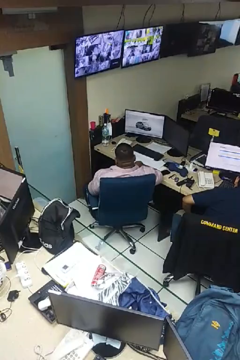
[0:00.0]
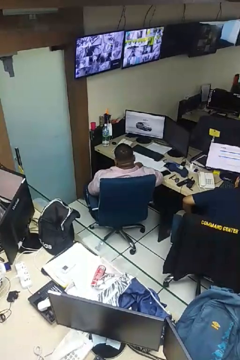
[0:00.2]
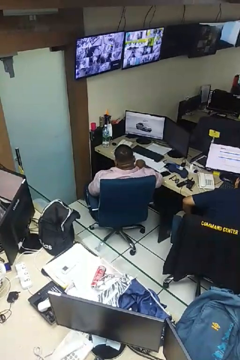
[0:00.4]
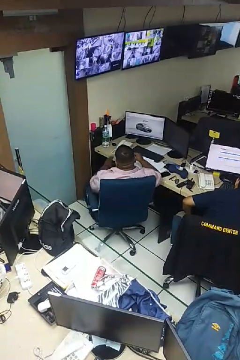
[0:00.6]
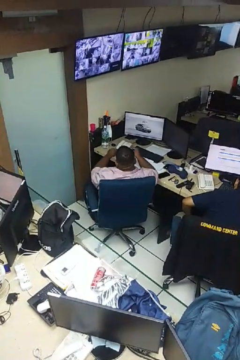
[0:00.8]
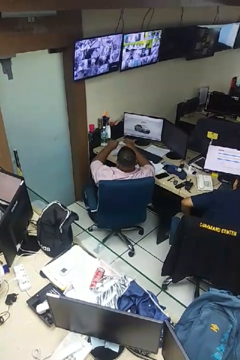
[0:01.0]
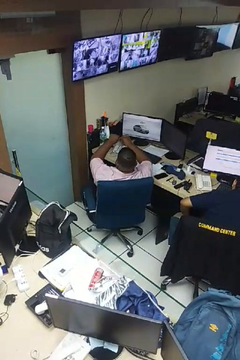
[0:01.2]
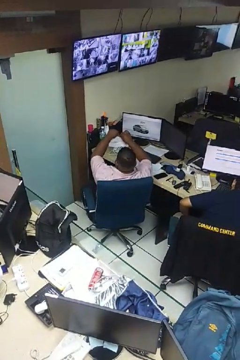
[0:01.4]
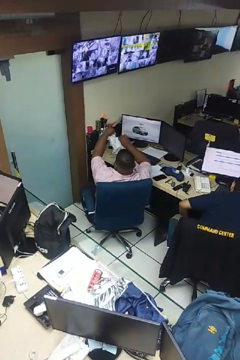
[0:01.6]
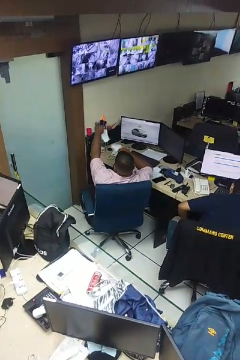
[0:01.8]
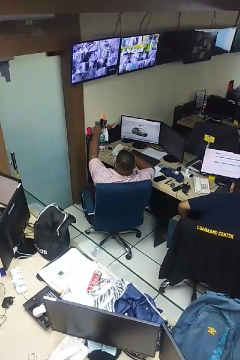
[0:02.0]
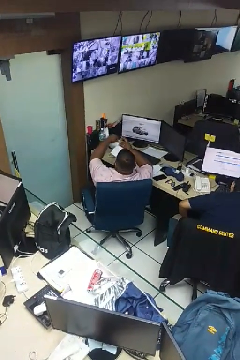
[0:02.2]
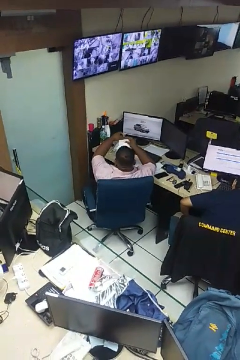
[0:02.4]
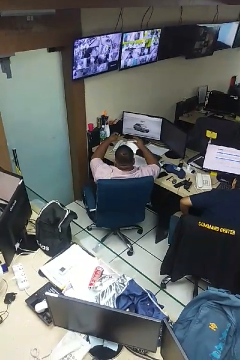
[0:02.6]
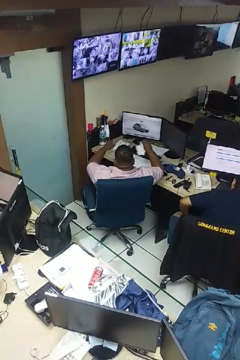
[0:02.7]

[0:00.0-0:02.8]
person tears paper

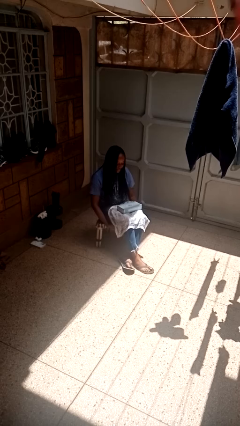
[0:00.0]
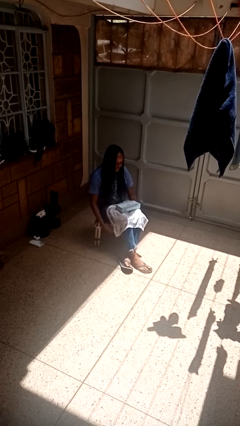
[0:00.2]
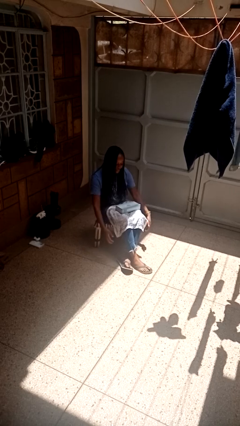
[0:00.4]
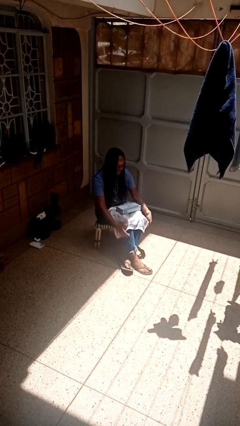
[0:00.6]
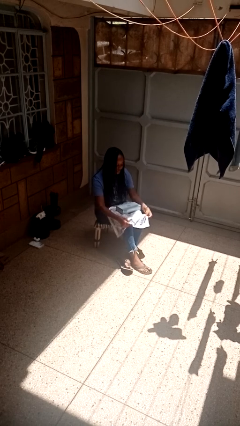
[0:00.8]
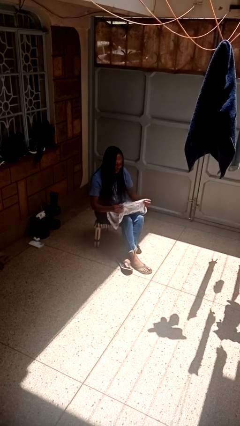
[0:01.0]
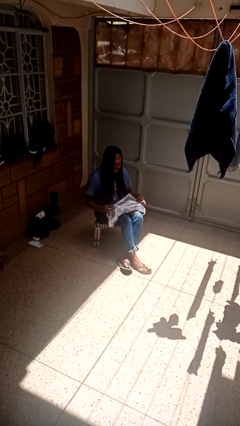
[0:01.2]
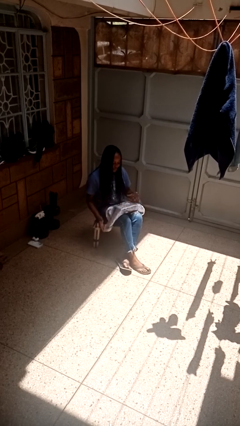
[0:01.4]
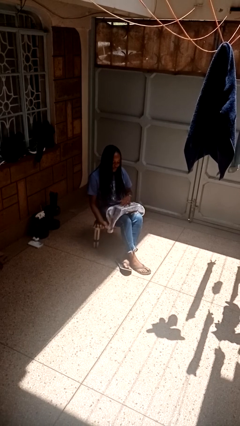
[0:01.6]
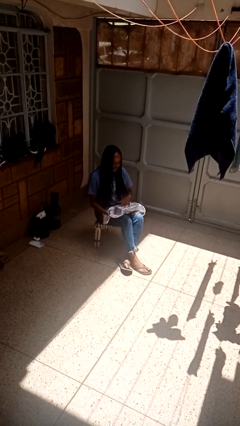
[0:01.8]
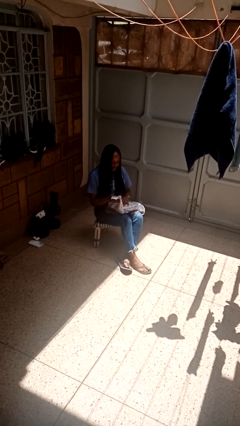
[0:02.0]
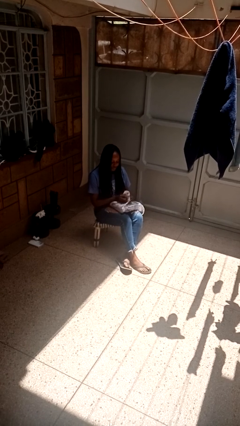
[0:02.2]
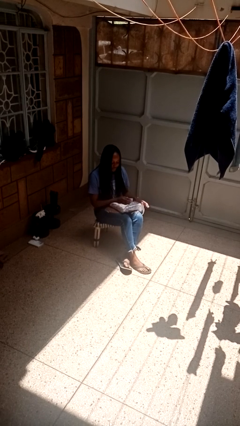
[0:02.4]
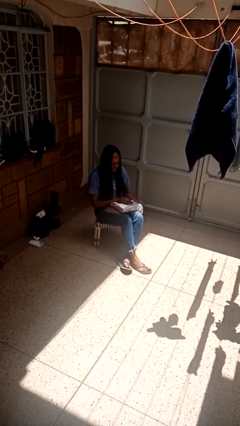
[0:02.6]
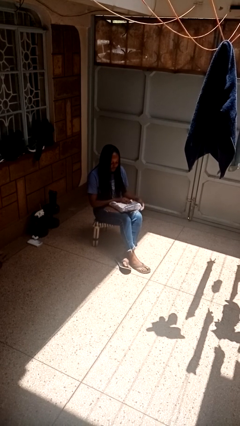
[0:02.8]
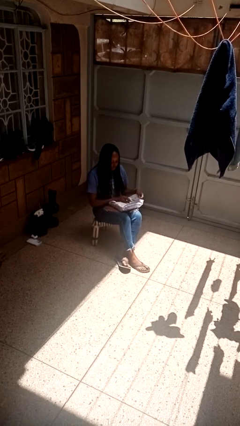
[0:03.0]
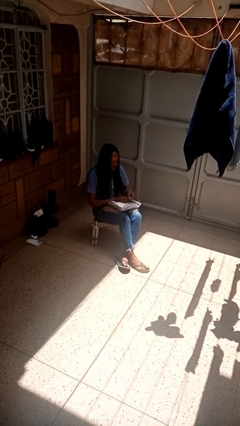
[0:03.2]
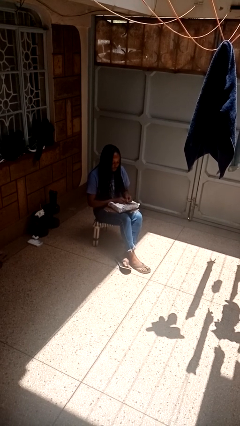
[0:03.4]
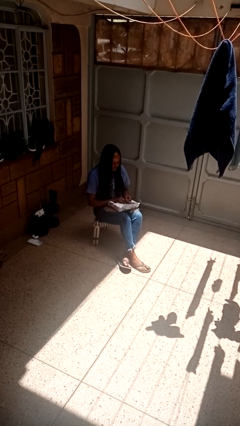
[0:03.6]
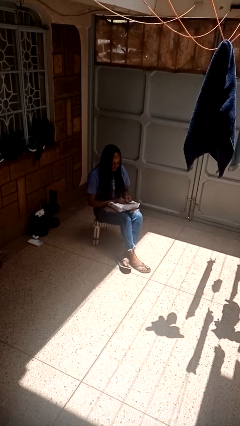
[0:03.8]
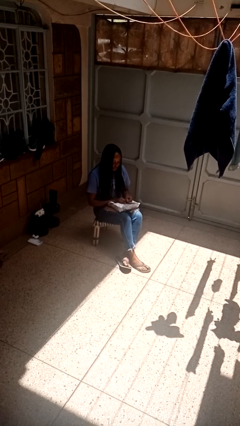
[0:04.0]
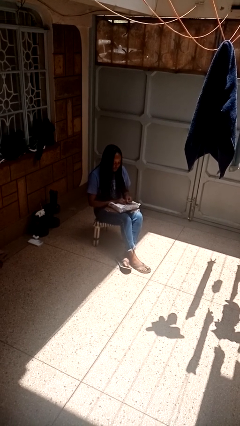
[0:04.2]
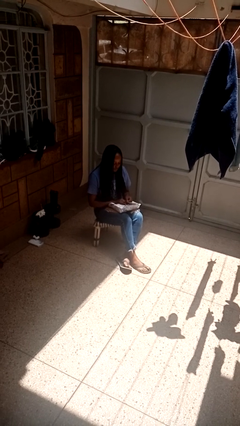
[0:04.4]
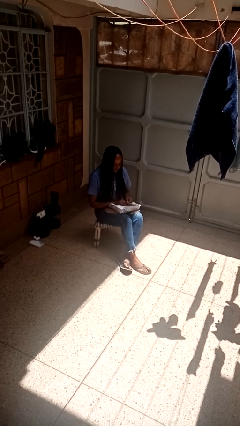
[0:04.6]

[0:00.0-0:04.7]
person wraps box

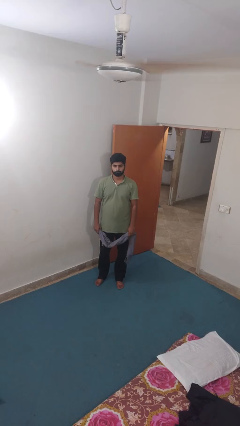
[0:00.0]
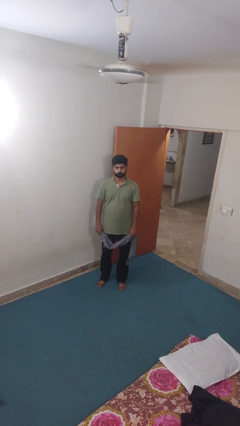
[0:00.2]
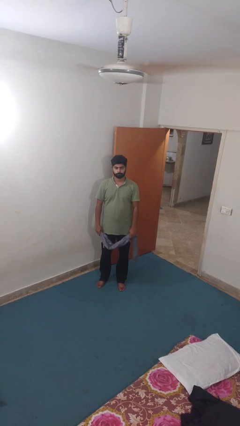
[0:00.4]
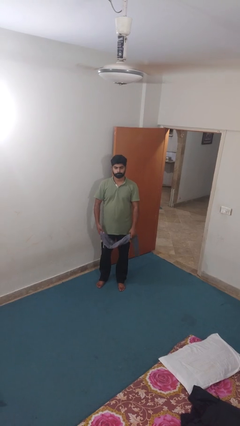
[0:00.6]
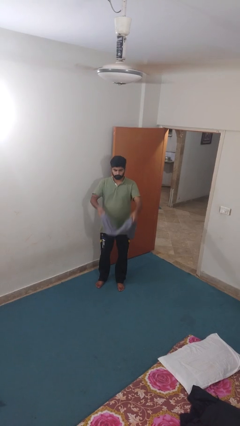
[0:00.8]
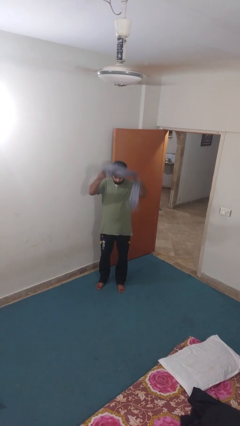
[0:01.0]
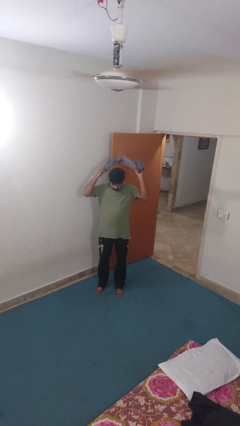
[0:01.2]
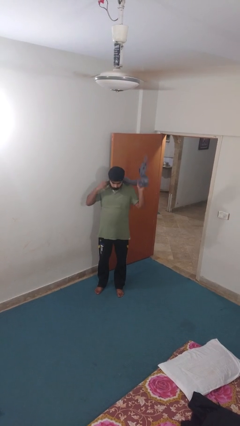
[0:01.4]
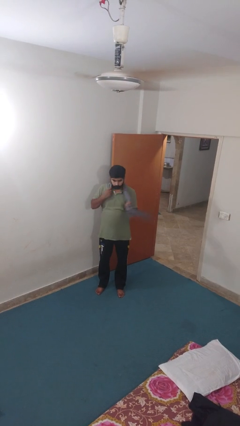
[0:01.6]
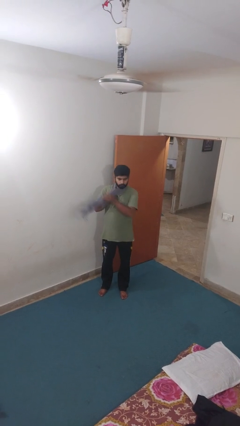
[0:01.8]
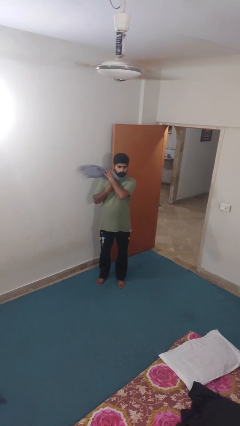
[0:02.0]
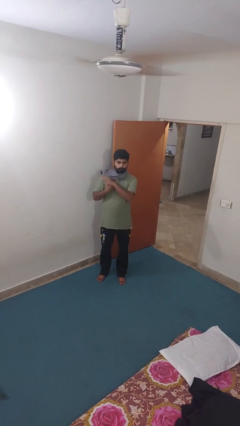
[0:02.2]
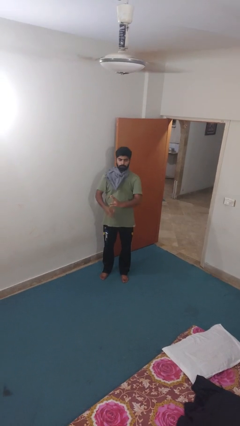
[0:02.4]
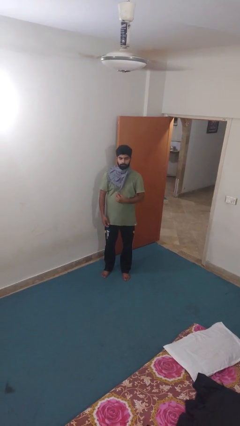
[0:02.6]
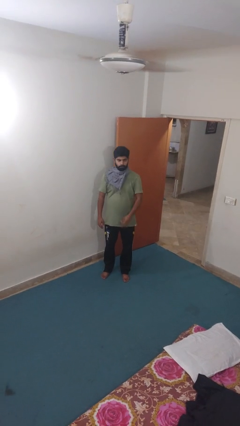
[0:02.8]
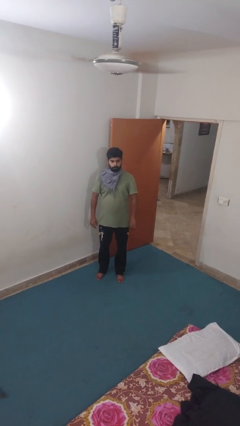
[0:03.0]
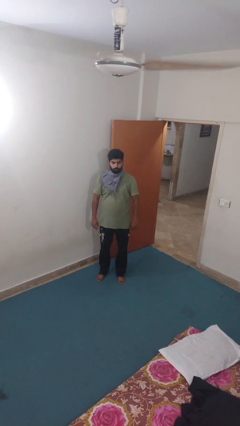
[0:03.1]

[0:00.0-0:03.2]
person puts on scarf

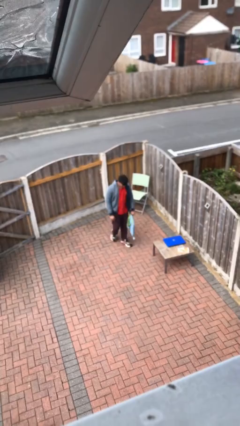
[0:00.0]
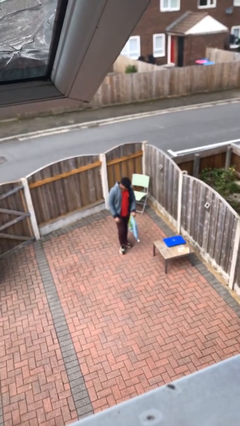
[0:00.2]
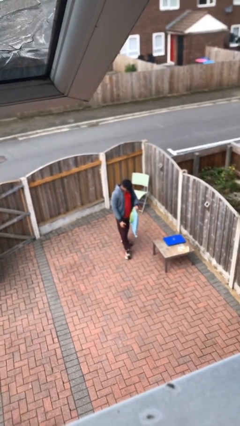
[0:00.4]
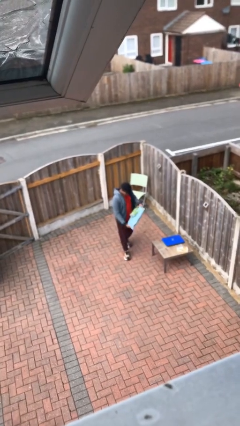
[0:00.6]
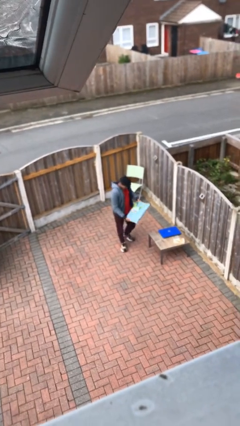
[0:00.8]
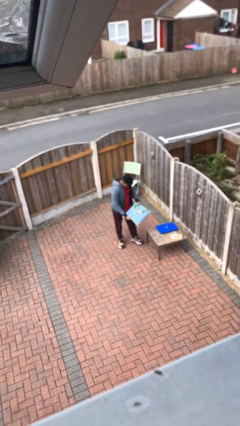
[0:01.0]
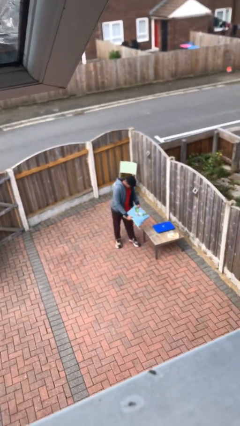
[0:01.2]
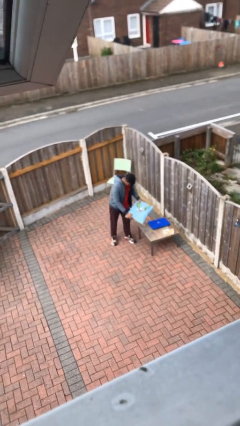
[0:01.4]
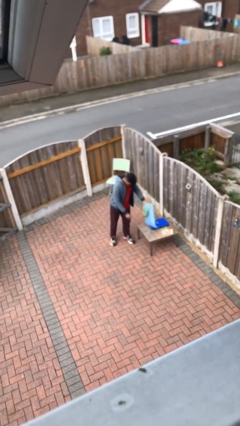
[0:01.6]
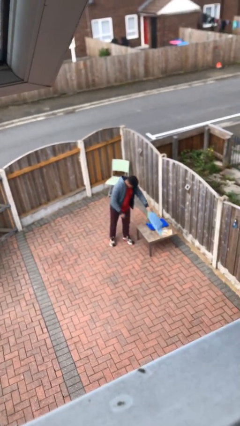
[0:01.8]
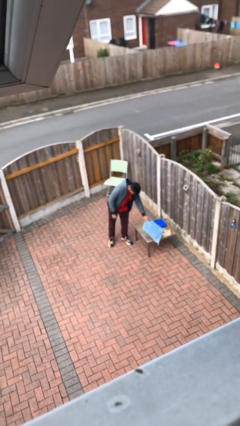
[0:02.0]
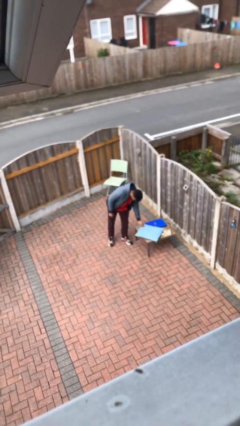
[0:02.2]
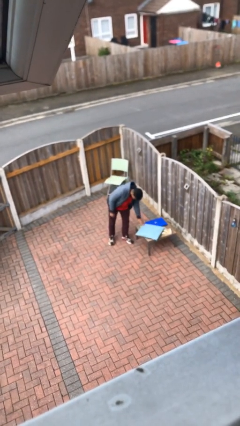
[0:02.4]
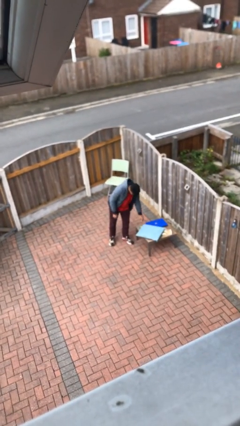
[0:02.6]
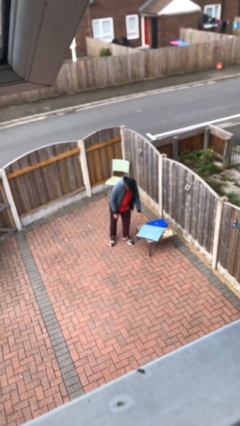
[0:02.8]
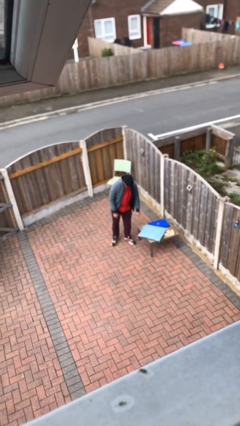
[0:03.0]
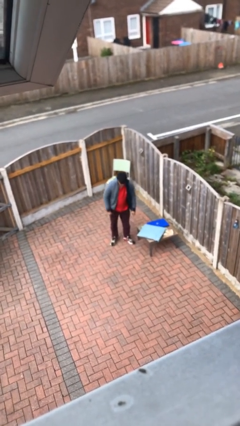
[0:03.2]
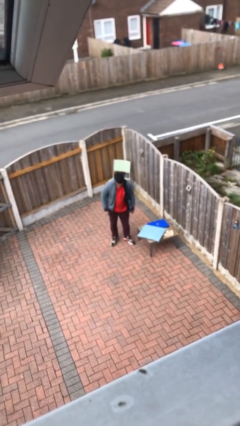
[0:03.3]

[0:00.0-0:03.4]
person puts down object on table

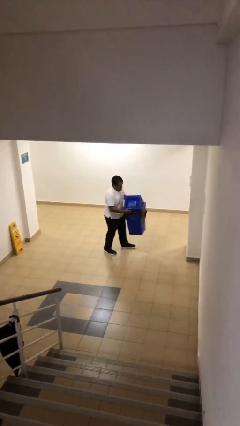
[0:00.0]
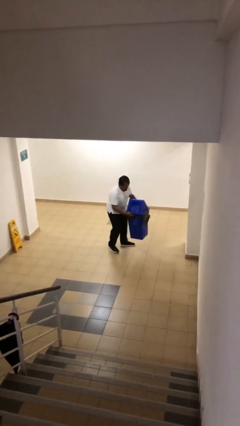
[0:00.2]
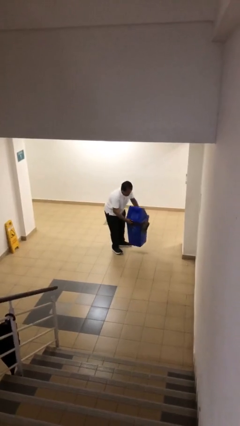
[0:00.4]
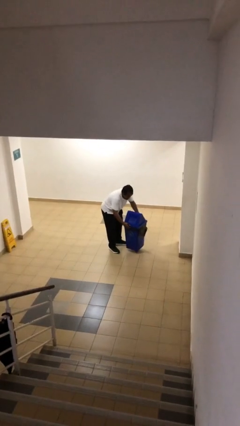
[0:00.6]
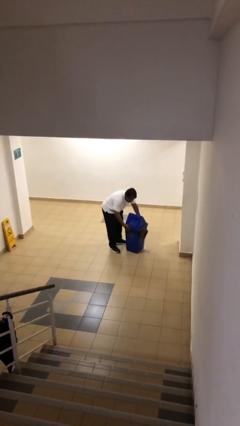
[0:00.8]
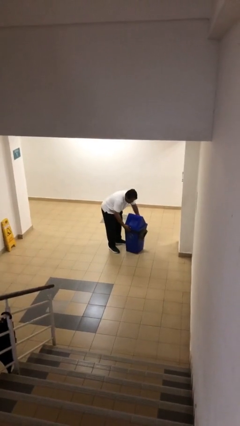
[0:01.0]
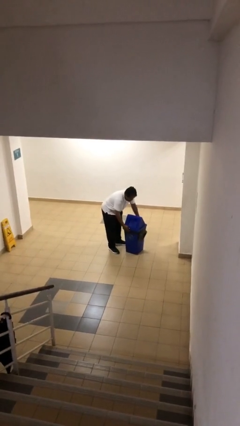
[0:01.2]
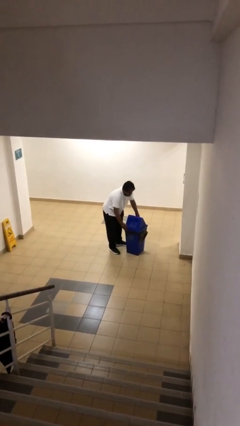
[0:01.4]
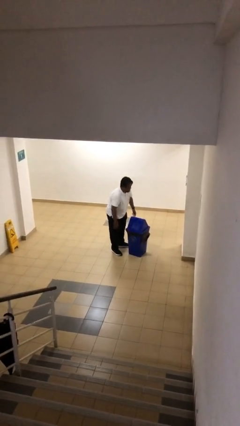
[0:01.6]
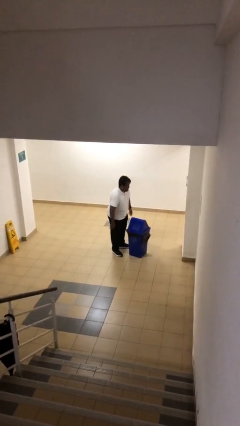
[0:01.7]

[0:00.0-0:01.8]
person puts down object on floor

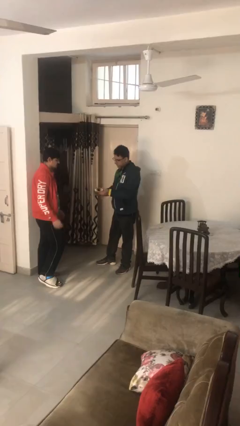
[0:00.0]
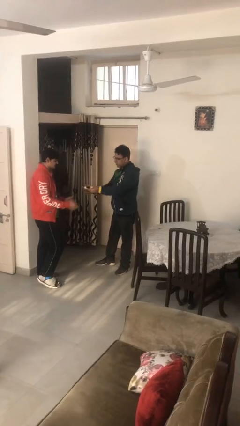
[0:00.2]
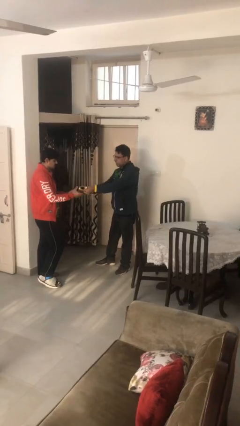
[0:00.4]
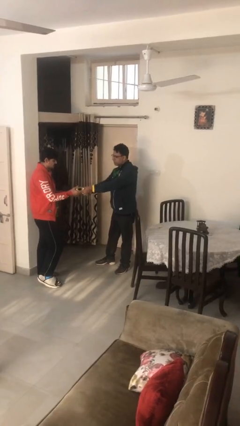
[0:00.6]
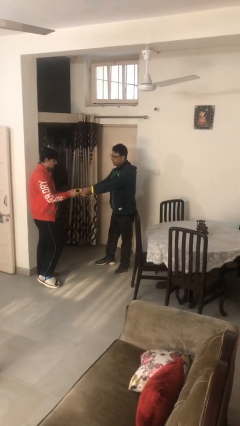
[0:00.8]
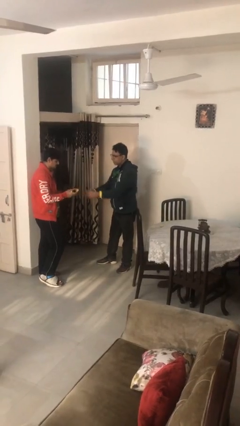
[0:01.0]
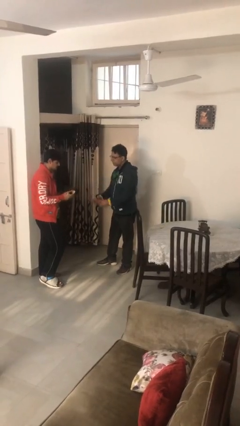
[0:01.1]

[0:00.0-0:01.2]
person transfers object to person

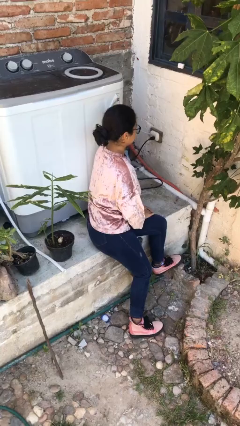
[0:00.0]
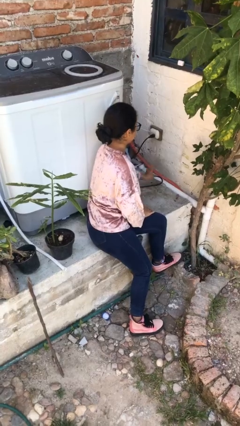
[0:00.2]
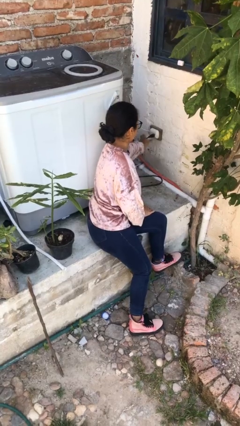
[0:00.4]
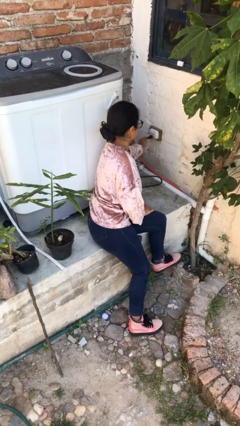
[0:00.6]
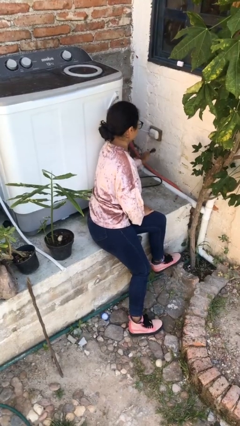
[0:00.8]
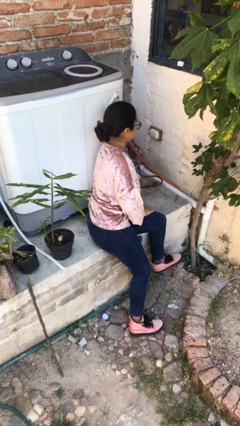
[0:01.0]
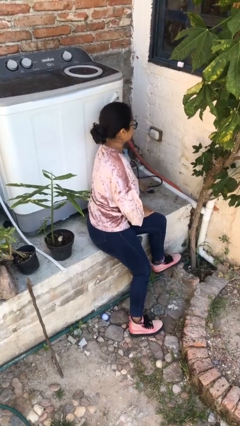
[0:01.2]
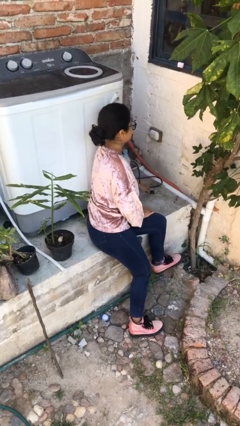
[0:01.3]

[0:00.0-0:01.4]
person unplugs from electrical socket
